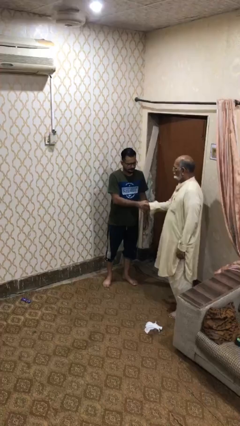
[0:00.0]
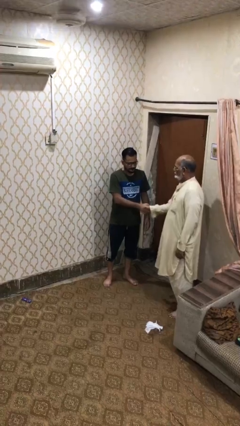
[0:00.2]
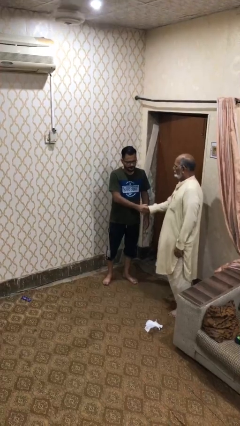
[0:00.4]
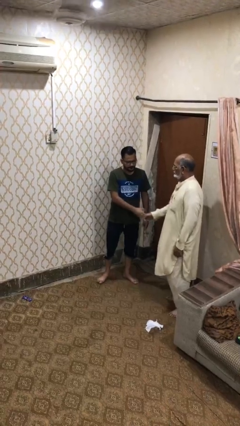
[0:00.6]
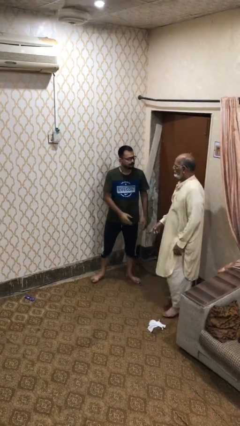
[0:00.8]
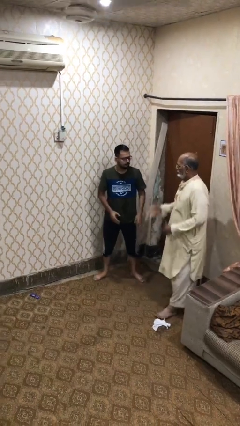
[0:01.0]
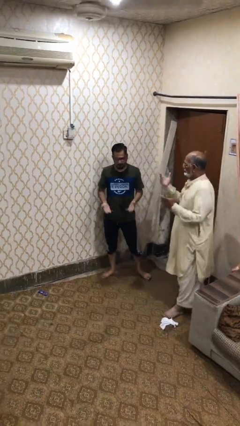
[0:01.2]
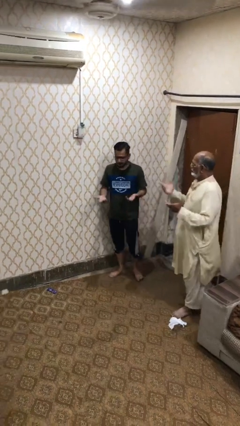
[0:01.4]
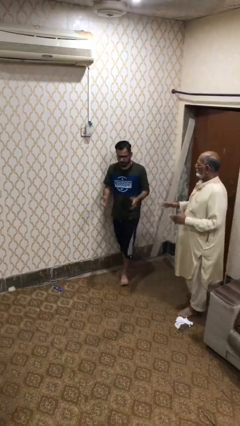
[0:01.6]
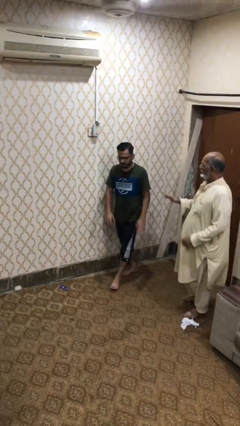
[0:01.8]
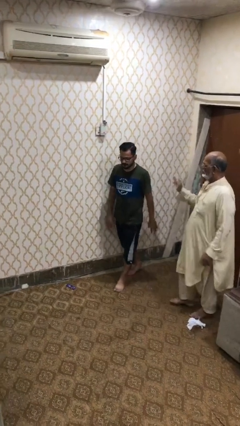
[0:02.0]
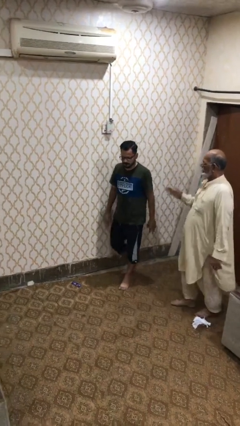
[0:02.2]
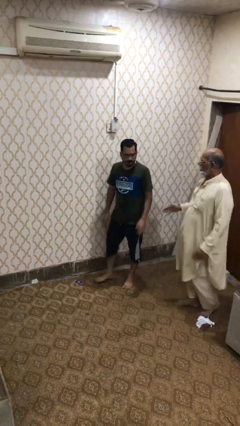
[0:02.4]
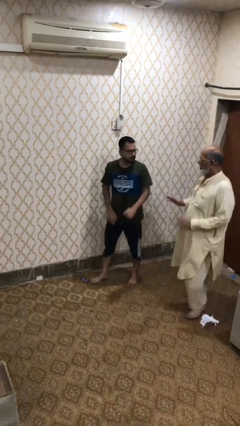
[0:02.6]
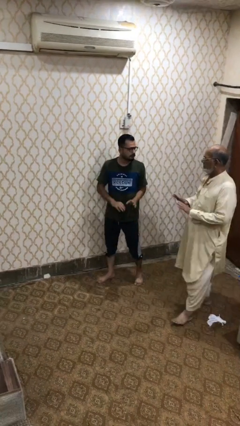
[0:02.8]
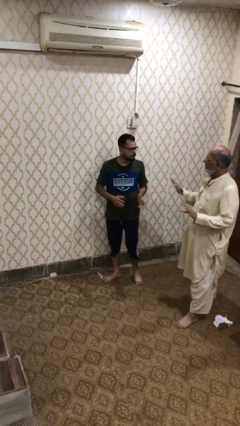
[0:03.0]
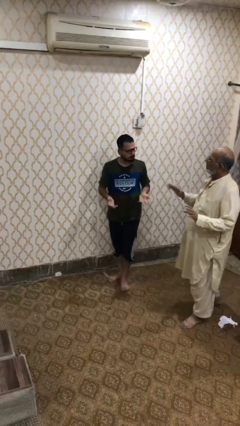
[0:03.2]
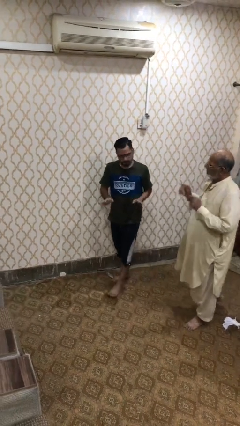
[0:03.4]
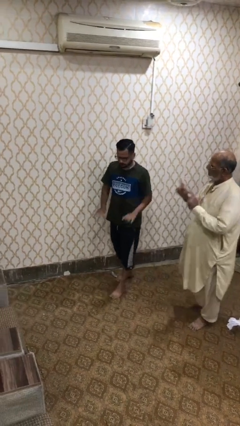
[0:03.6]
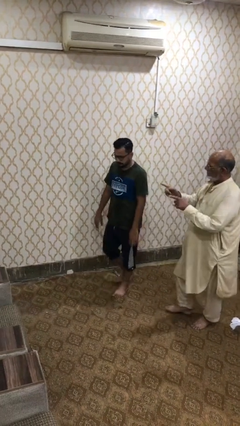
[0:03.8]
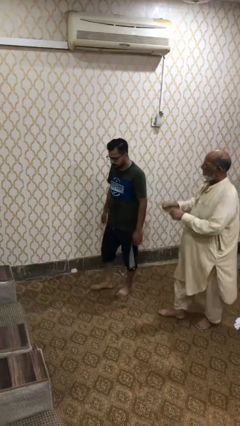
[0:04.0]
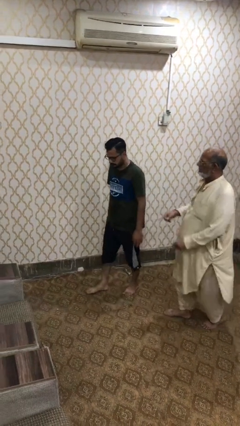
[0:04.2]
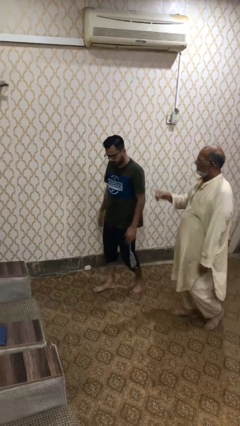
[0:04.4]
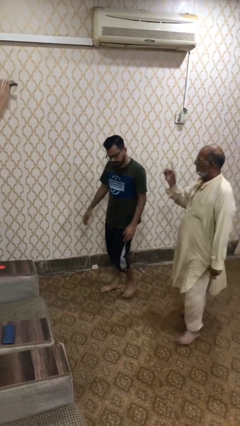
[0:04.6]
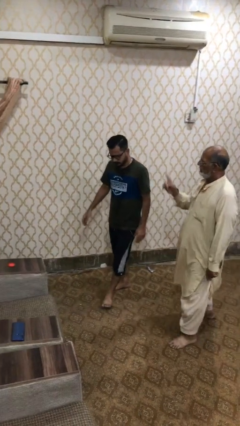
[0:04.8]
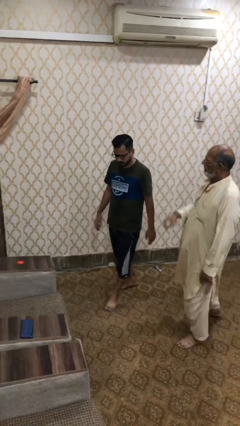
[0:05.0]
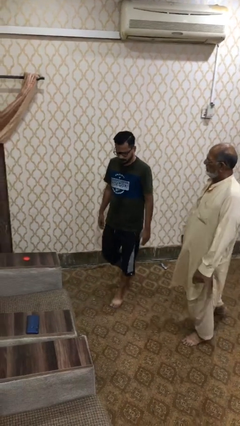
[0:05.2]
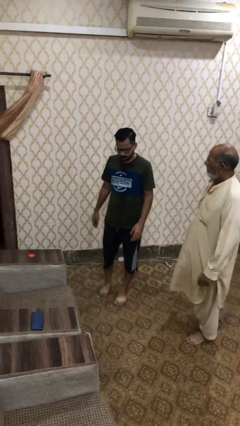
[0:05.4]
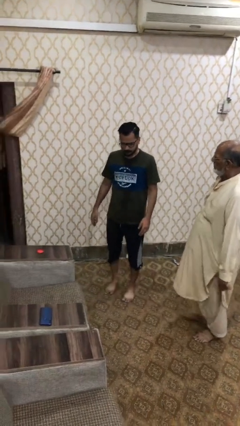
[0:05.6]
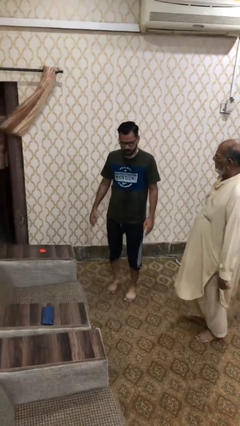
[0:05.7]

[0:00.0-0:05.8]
person talks to person

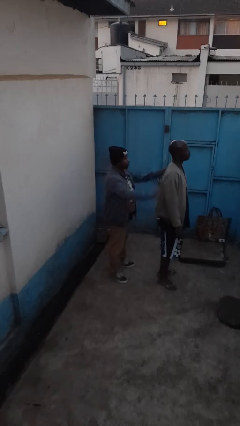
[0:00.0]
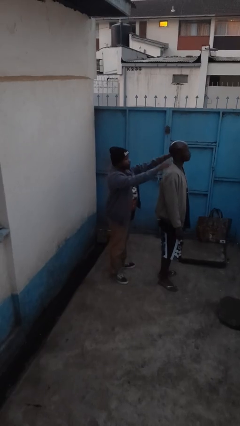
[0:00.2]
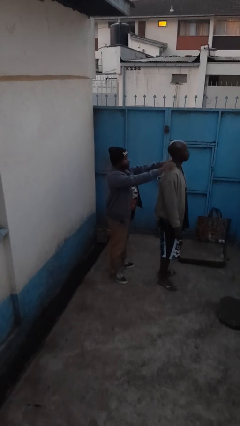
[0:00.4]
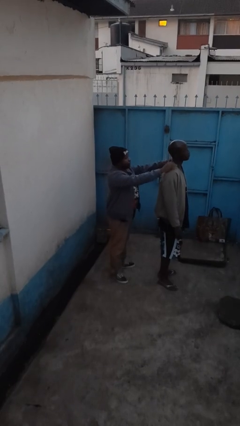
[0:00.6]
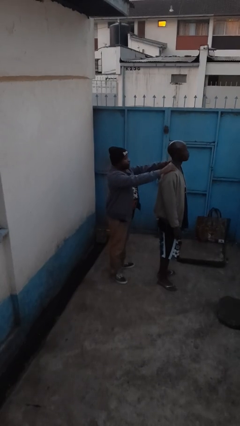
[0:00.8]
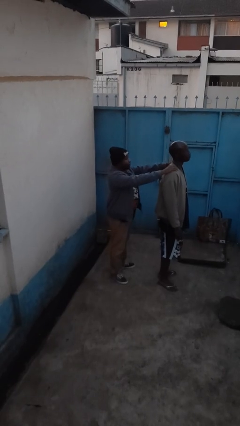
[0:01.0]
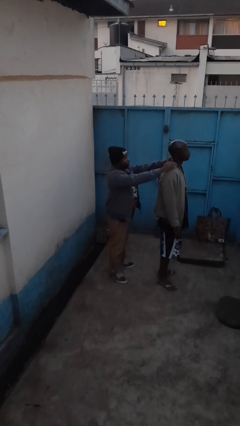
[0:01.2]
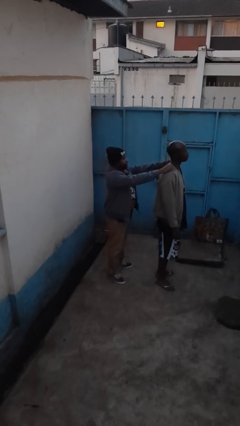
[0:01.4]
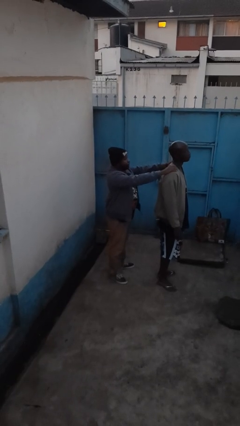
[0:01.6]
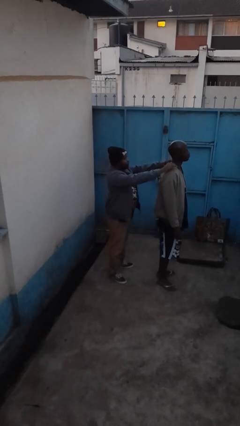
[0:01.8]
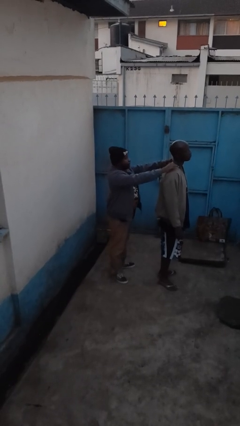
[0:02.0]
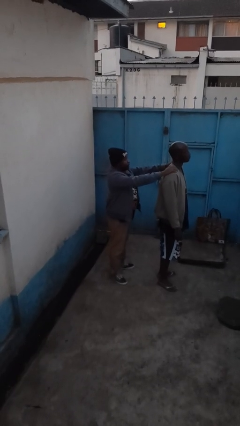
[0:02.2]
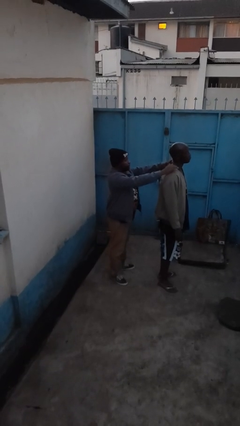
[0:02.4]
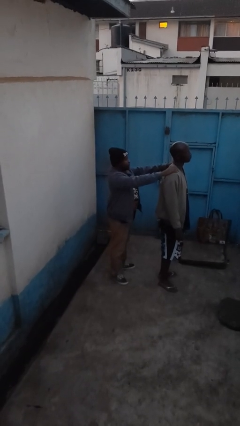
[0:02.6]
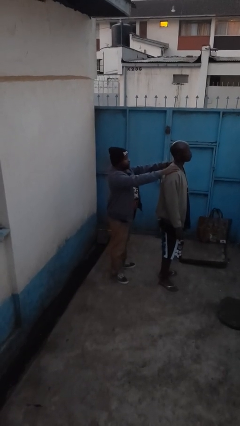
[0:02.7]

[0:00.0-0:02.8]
person pounds shoulders of person

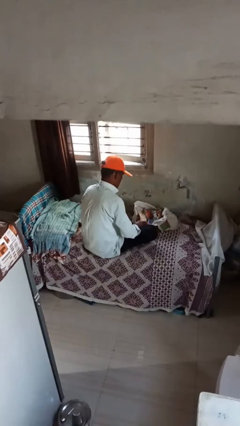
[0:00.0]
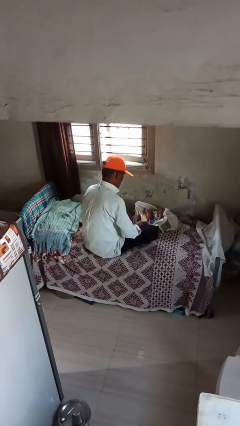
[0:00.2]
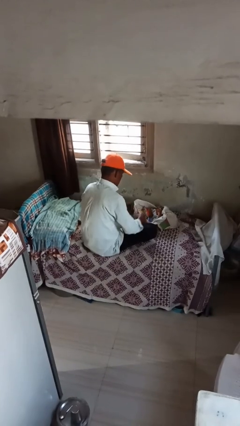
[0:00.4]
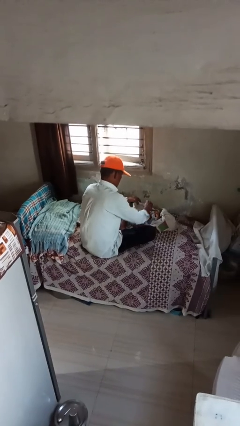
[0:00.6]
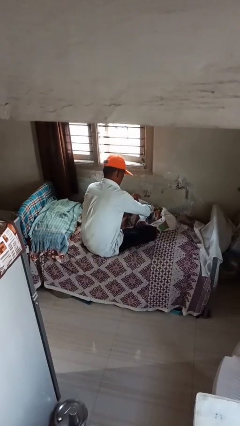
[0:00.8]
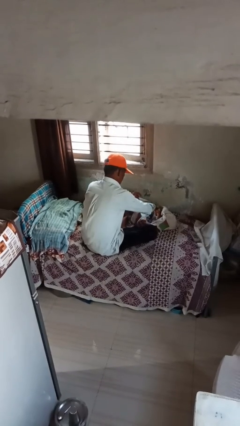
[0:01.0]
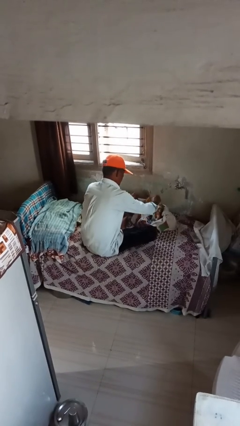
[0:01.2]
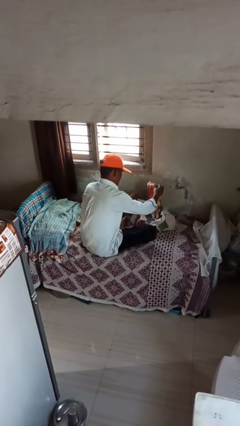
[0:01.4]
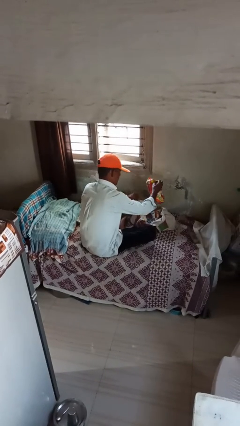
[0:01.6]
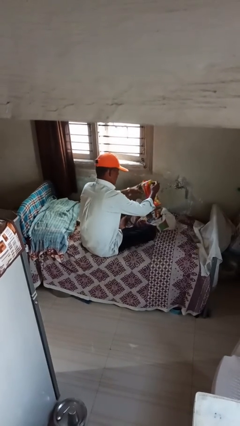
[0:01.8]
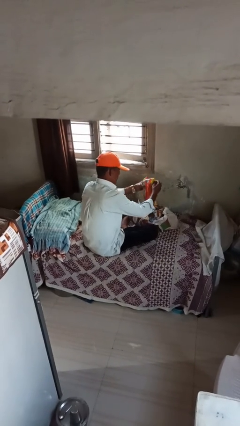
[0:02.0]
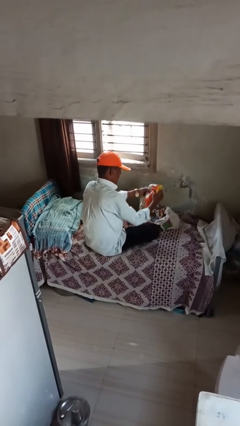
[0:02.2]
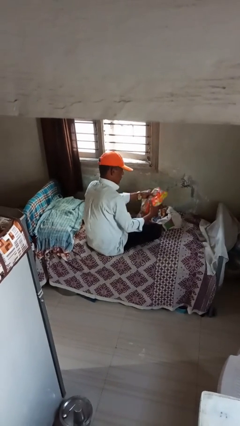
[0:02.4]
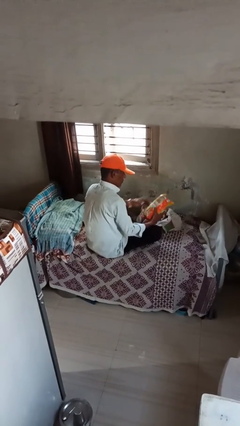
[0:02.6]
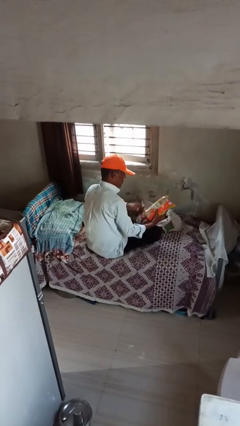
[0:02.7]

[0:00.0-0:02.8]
person takes object from bag

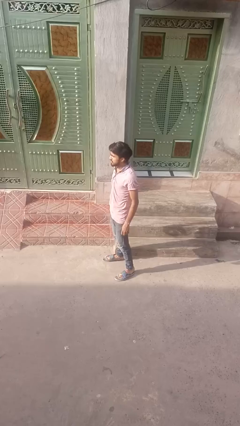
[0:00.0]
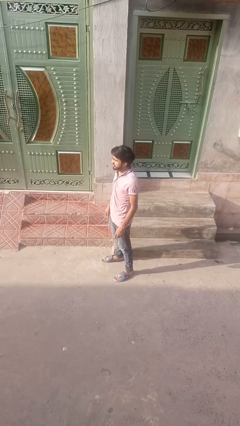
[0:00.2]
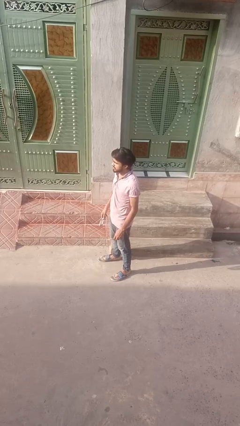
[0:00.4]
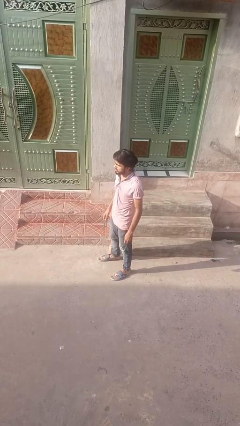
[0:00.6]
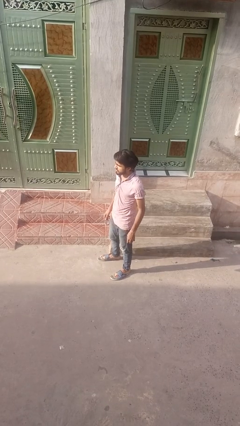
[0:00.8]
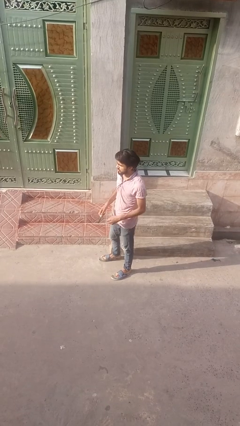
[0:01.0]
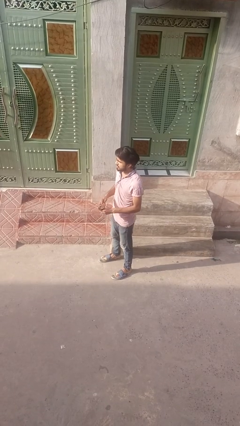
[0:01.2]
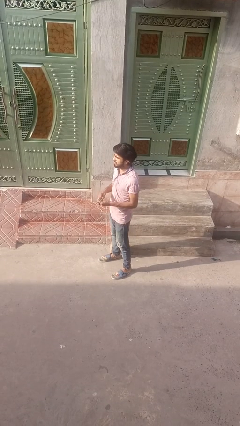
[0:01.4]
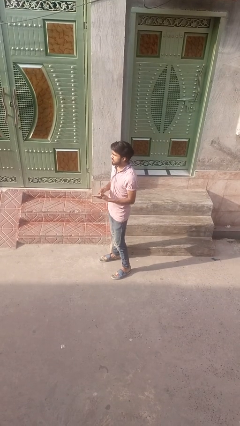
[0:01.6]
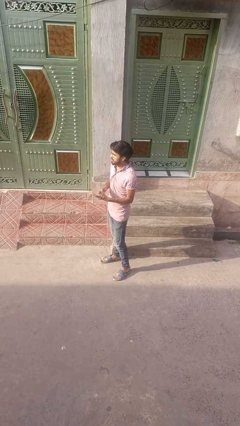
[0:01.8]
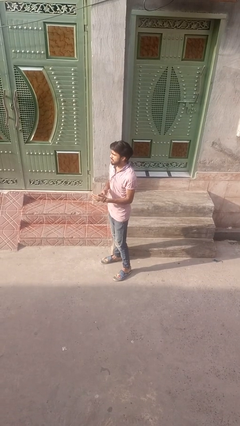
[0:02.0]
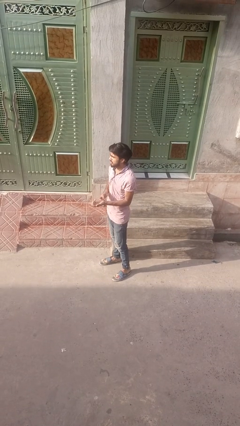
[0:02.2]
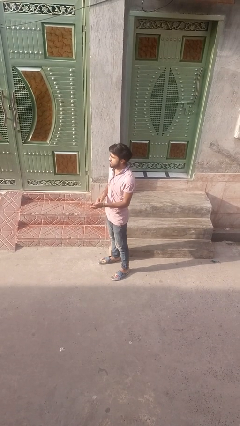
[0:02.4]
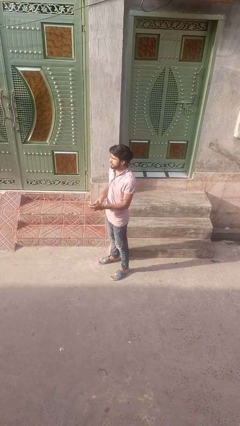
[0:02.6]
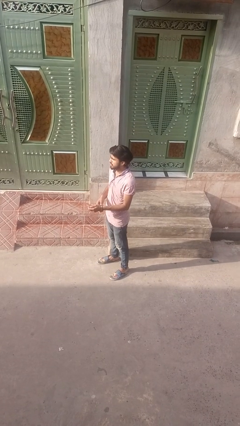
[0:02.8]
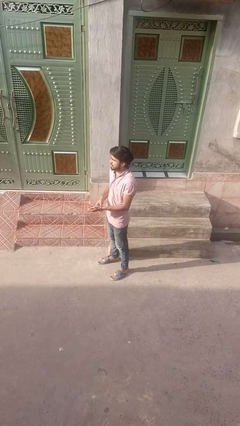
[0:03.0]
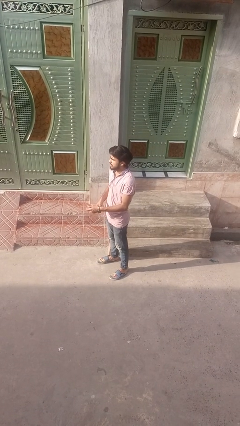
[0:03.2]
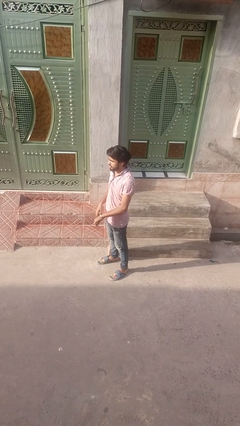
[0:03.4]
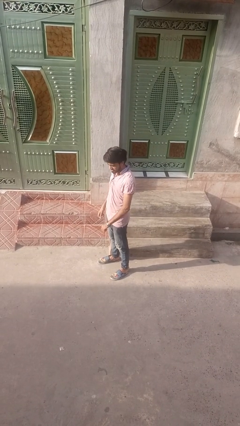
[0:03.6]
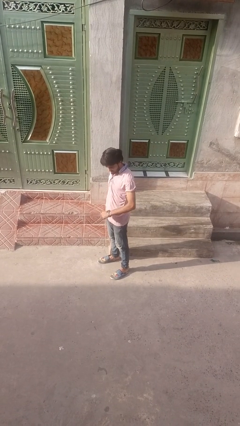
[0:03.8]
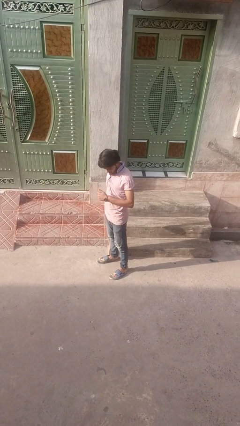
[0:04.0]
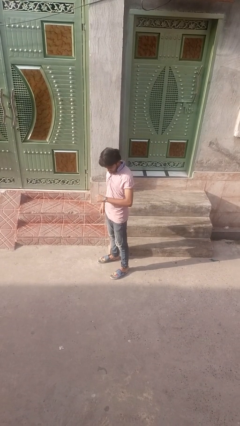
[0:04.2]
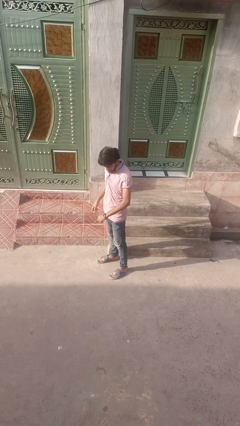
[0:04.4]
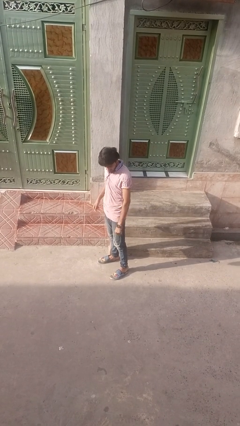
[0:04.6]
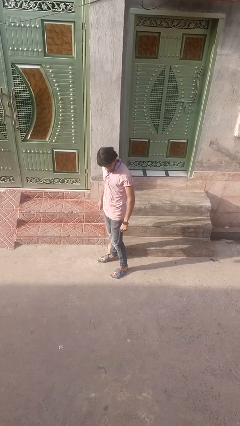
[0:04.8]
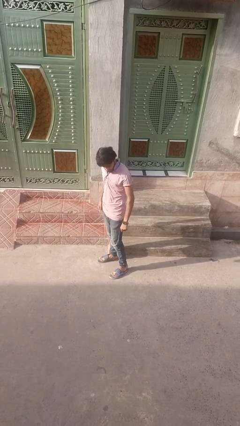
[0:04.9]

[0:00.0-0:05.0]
person puts on wristwatch

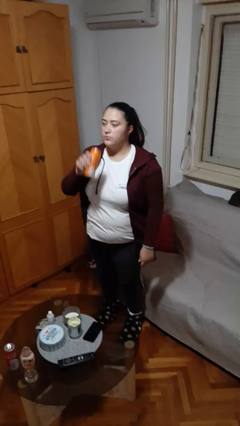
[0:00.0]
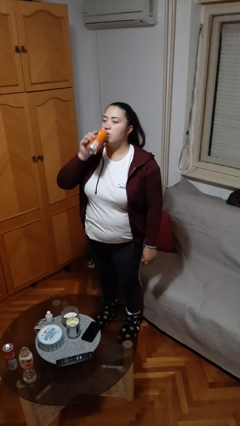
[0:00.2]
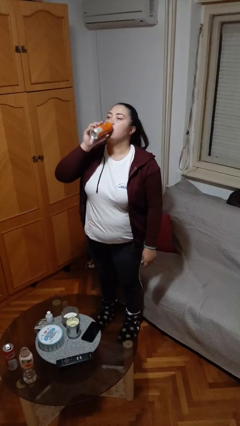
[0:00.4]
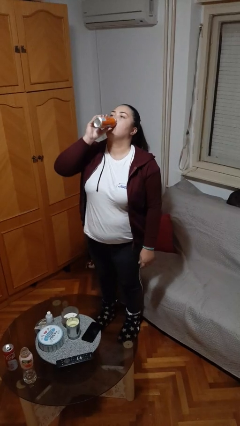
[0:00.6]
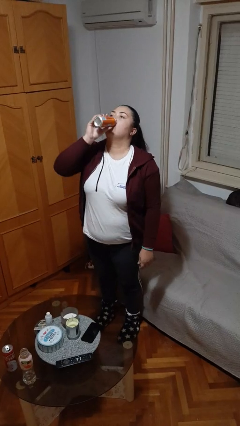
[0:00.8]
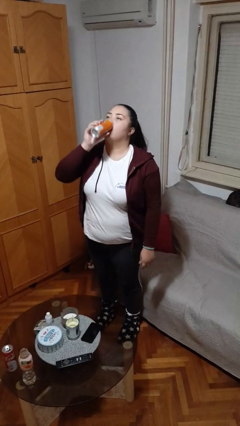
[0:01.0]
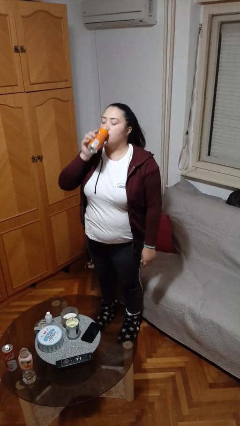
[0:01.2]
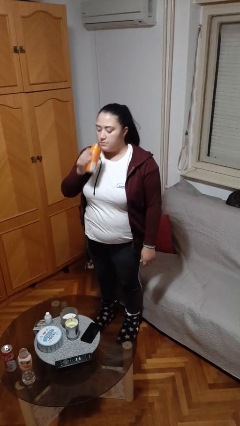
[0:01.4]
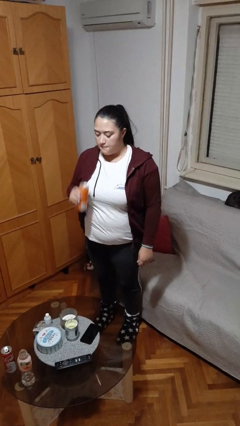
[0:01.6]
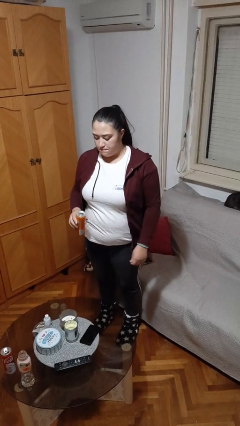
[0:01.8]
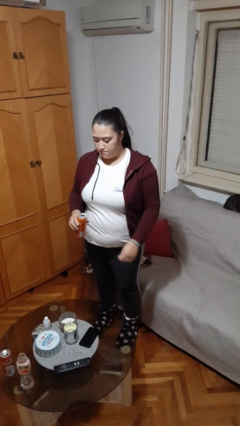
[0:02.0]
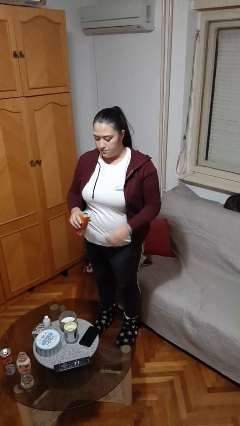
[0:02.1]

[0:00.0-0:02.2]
person drinks from beverage can
